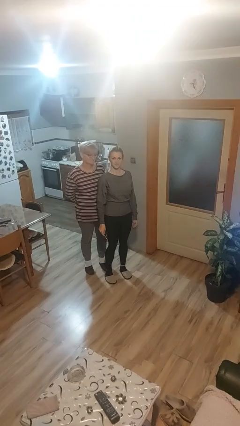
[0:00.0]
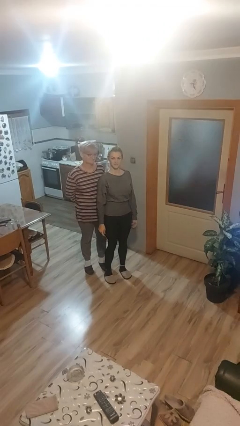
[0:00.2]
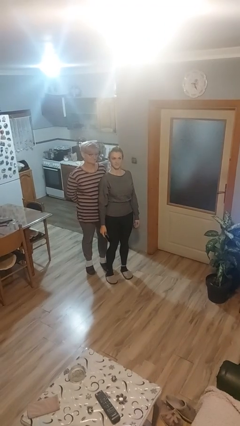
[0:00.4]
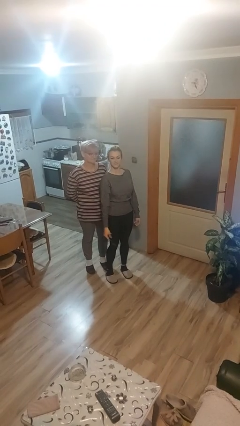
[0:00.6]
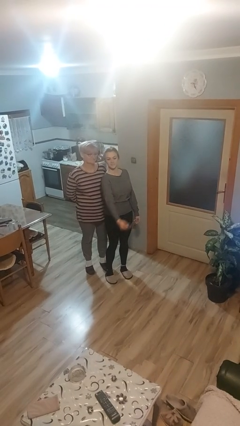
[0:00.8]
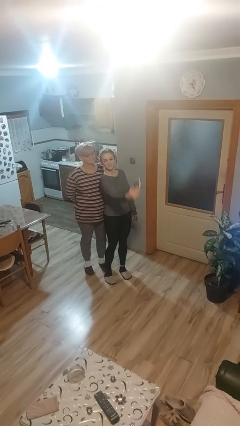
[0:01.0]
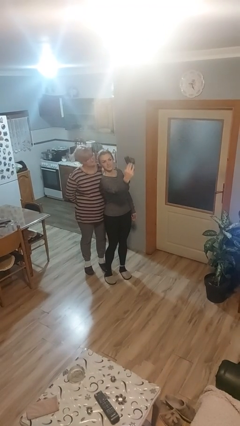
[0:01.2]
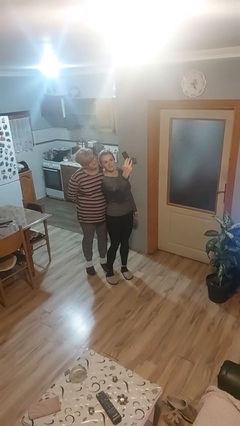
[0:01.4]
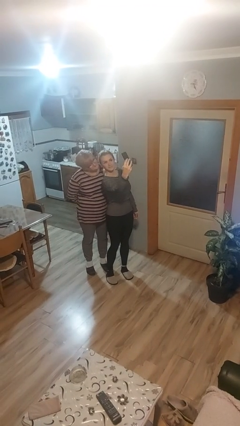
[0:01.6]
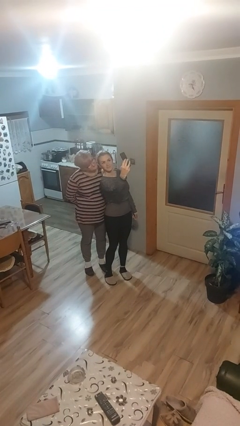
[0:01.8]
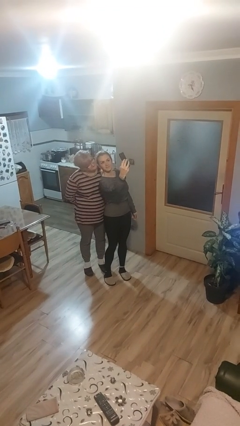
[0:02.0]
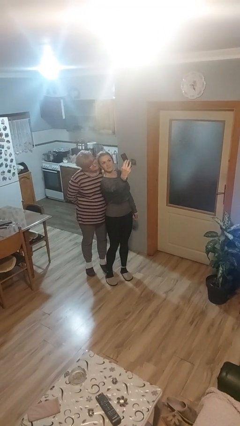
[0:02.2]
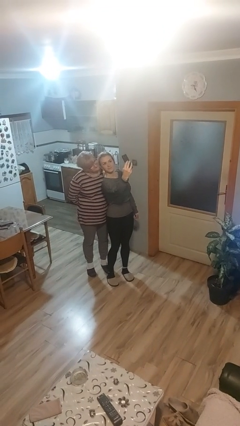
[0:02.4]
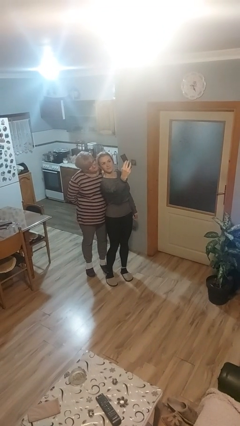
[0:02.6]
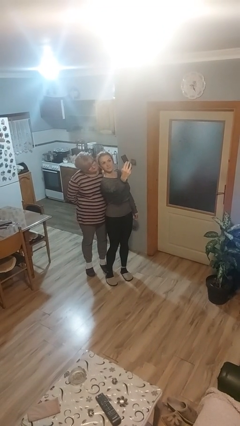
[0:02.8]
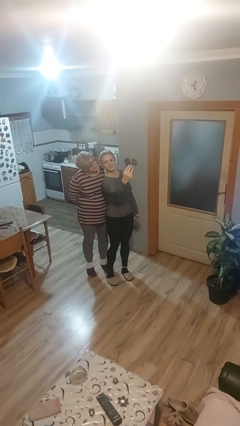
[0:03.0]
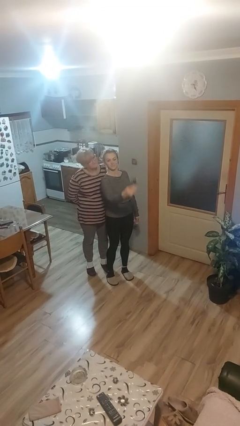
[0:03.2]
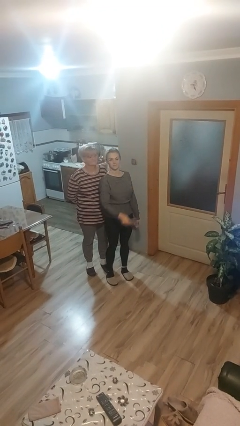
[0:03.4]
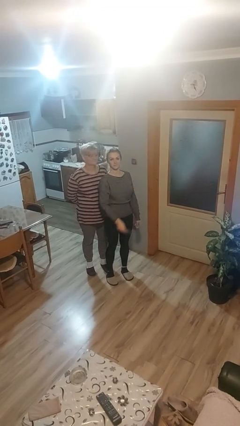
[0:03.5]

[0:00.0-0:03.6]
person takes selfie with person

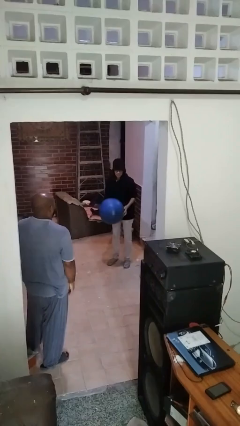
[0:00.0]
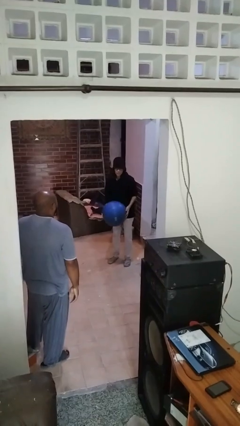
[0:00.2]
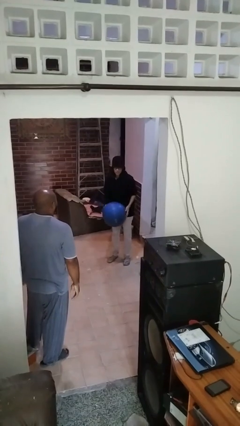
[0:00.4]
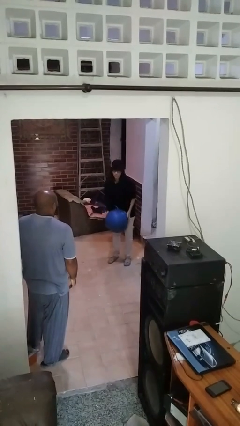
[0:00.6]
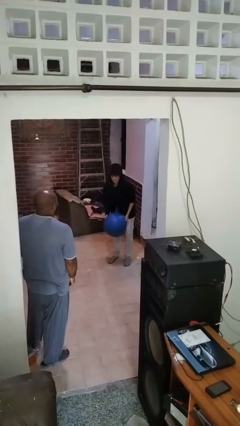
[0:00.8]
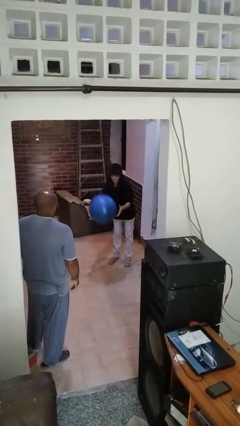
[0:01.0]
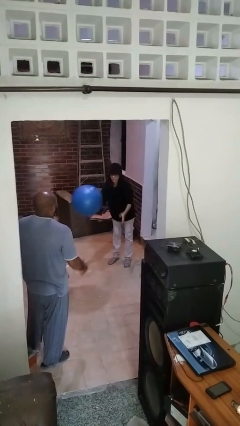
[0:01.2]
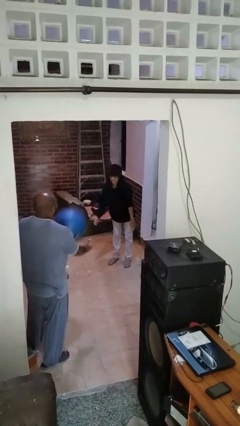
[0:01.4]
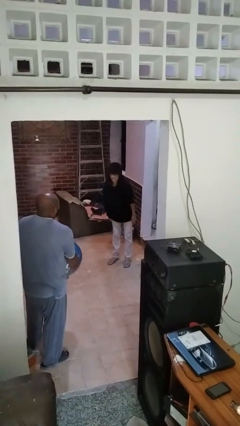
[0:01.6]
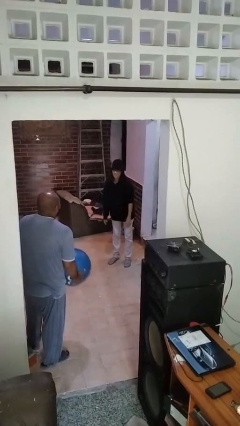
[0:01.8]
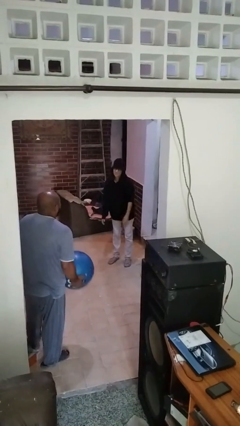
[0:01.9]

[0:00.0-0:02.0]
person throws object to person

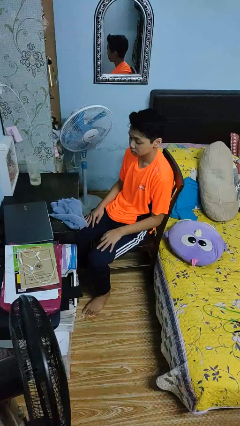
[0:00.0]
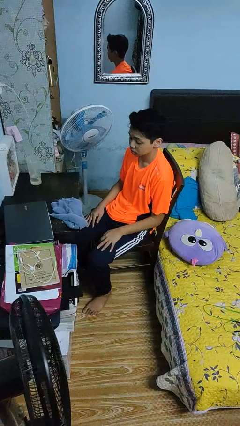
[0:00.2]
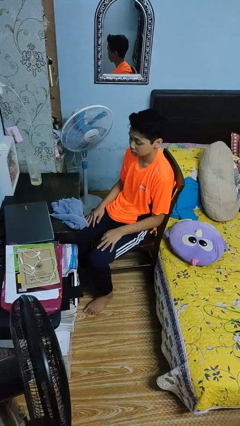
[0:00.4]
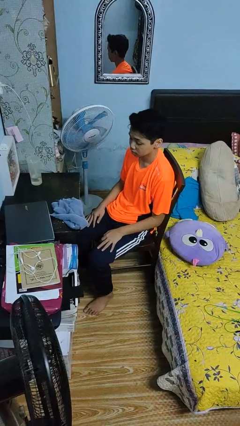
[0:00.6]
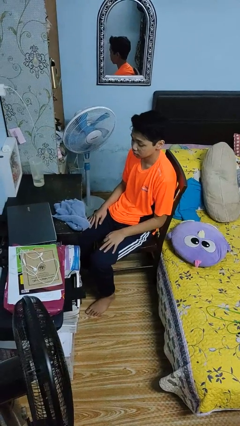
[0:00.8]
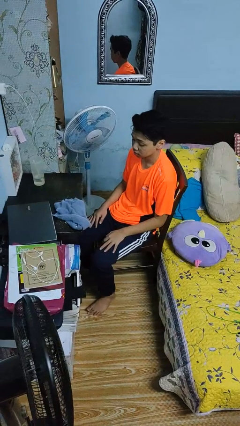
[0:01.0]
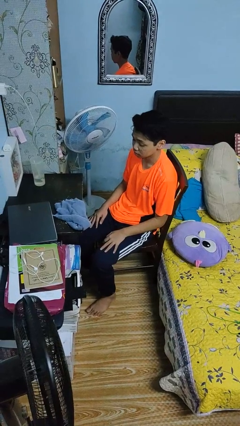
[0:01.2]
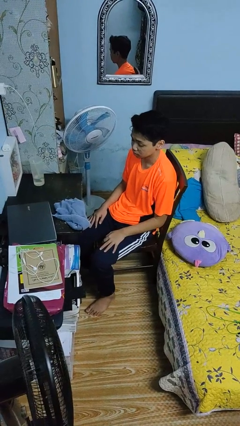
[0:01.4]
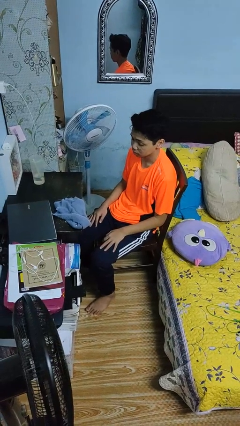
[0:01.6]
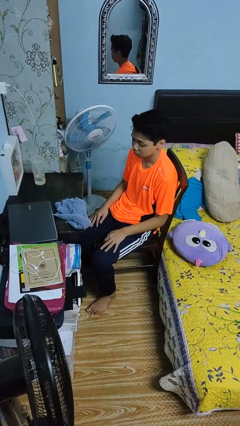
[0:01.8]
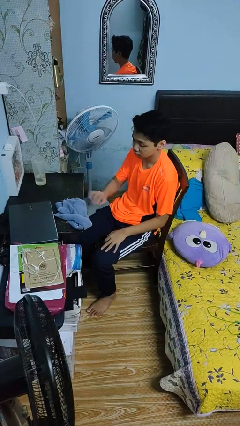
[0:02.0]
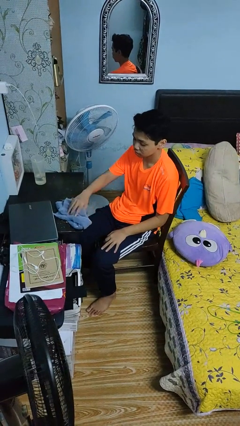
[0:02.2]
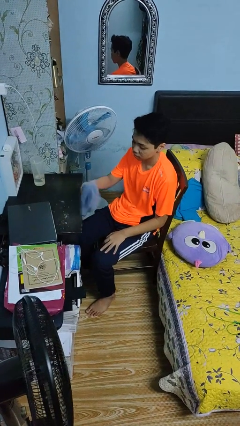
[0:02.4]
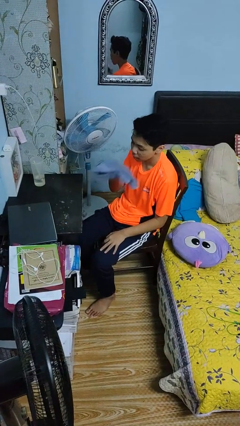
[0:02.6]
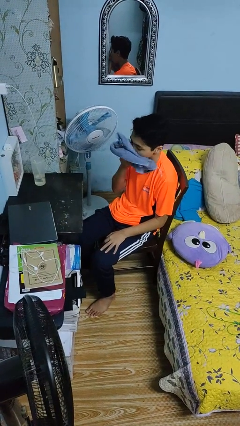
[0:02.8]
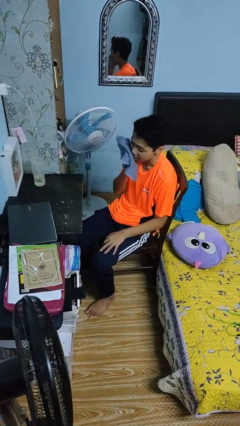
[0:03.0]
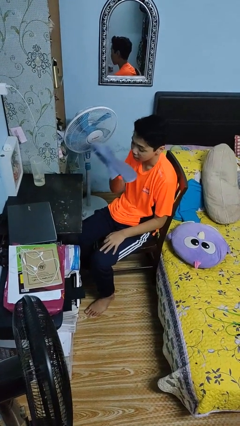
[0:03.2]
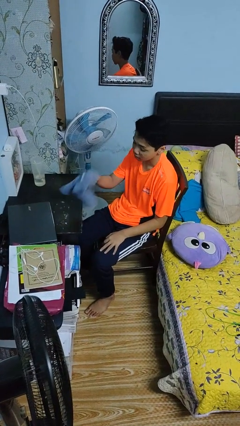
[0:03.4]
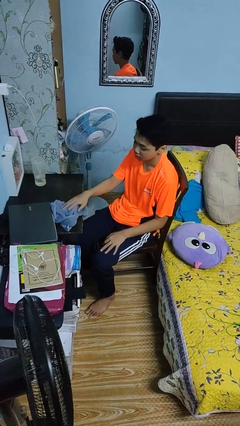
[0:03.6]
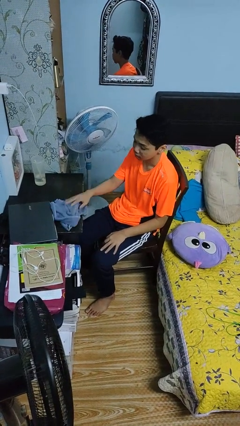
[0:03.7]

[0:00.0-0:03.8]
person wipes mouth with napkin

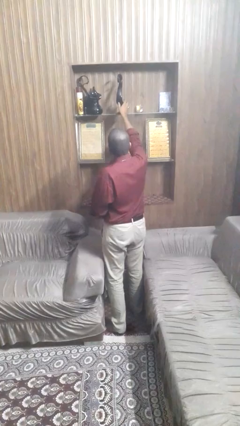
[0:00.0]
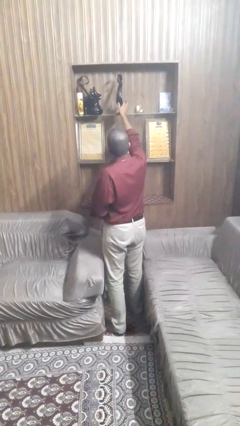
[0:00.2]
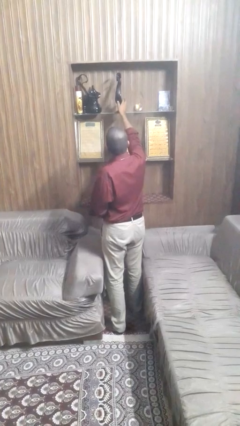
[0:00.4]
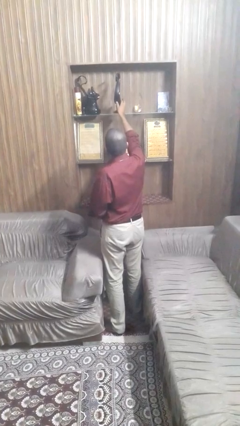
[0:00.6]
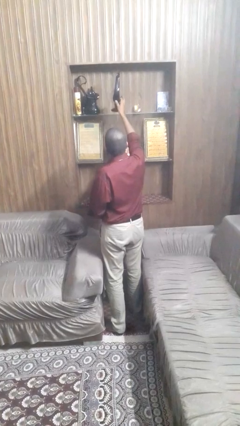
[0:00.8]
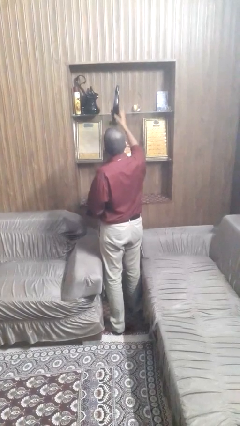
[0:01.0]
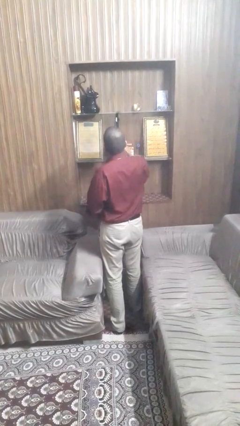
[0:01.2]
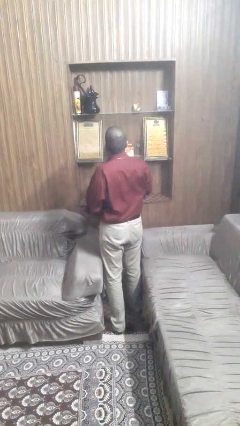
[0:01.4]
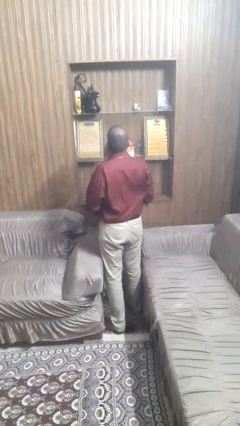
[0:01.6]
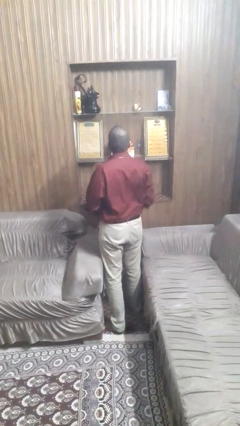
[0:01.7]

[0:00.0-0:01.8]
person picks up object from shelf

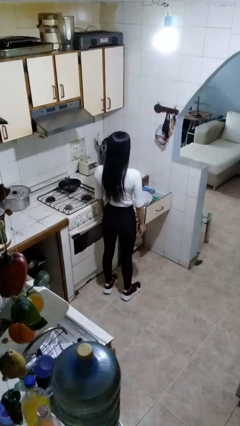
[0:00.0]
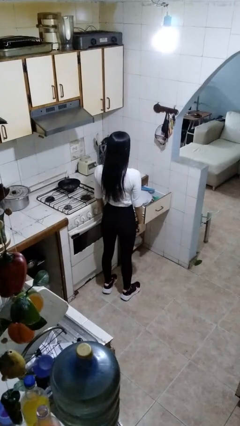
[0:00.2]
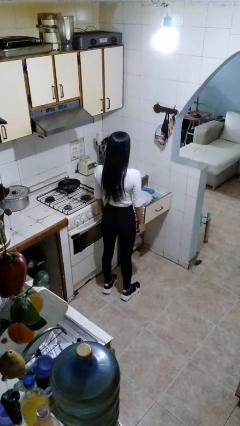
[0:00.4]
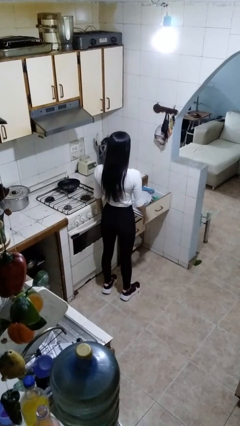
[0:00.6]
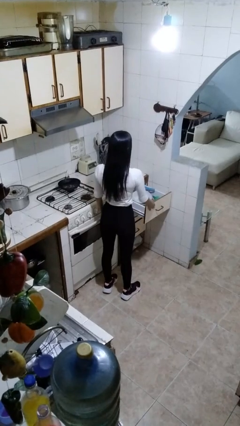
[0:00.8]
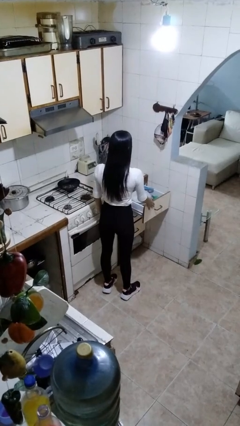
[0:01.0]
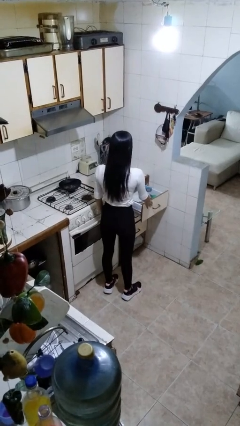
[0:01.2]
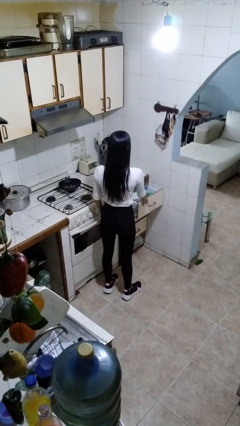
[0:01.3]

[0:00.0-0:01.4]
person closes kitchen drawer

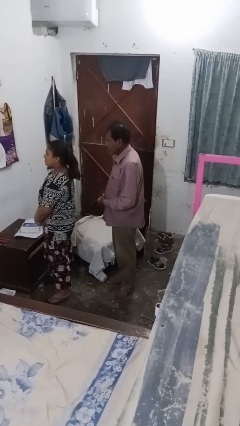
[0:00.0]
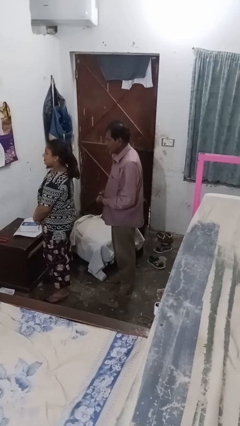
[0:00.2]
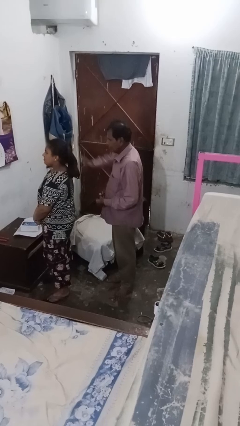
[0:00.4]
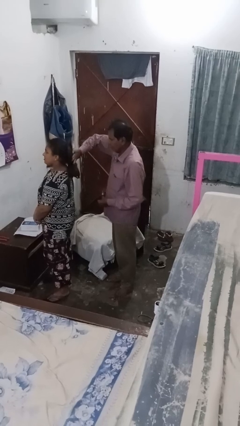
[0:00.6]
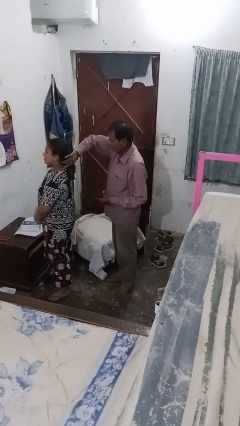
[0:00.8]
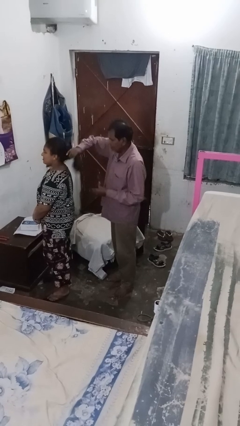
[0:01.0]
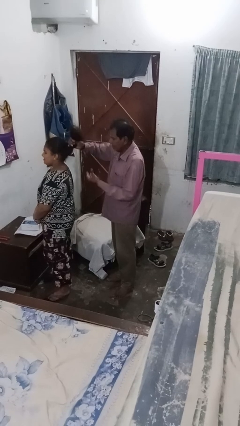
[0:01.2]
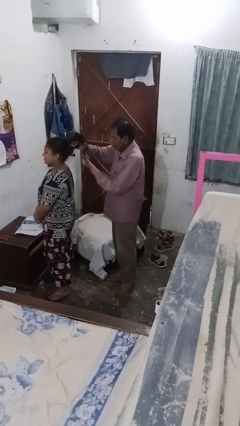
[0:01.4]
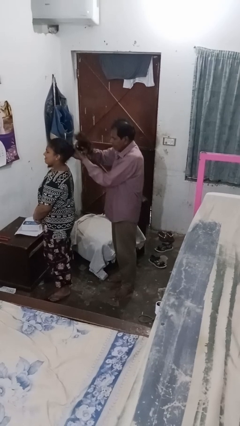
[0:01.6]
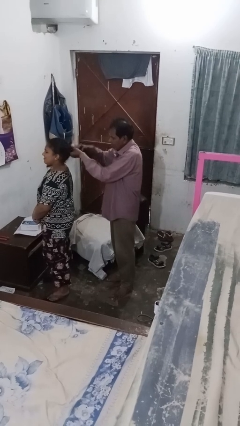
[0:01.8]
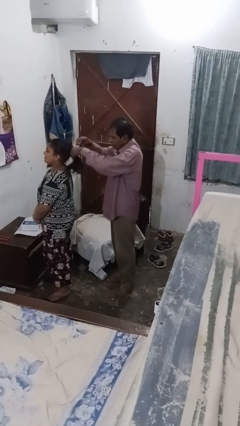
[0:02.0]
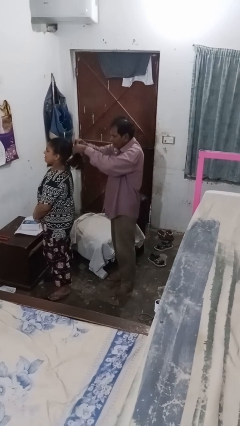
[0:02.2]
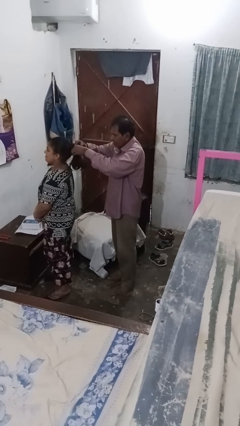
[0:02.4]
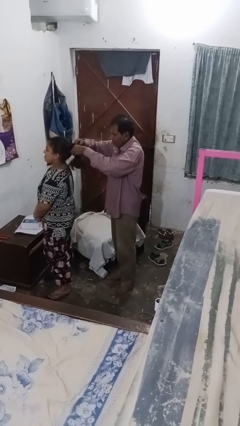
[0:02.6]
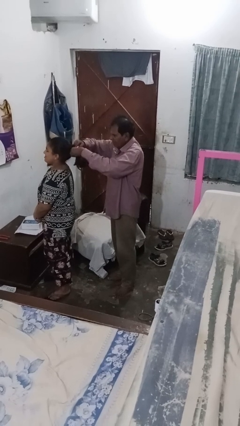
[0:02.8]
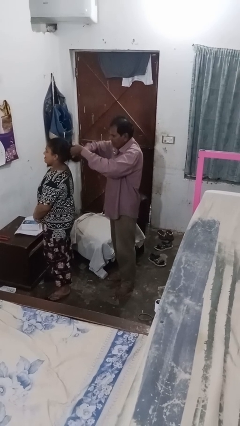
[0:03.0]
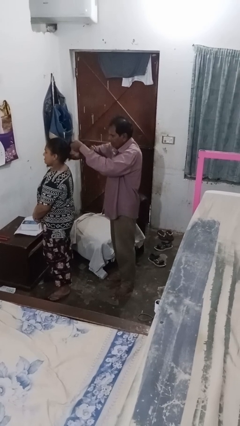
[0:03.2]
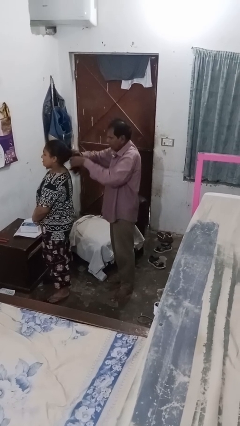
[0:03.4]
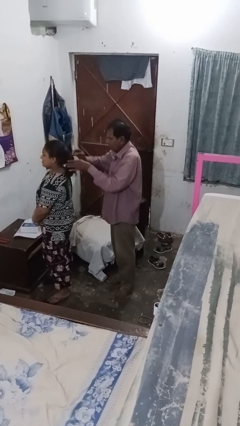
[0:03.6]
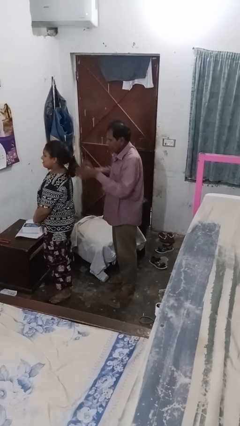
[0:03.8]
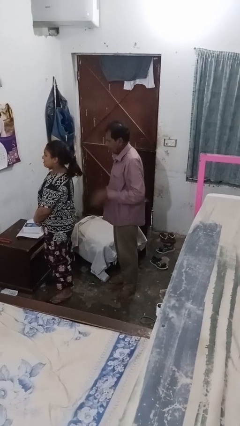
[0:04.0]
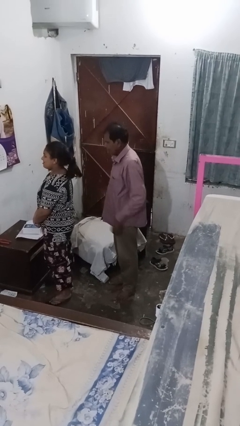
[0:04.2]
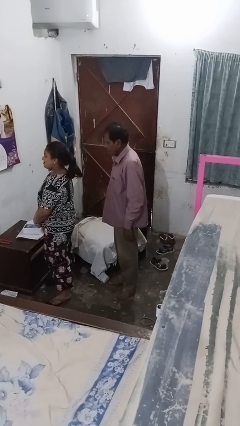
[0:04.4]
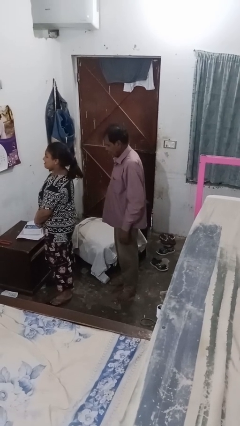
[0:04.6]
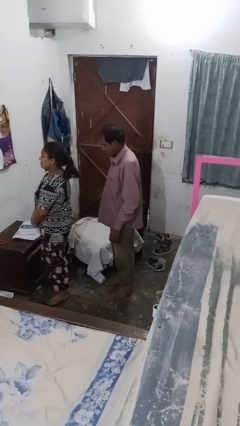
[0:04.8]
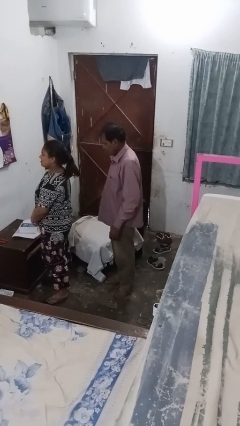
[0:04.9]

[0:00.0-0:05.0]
person braids hair of person
